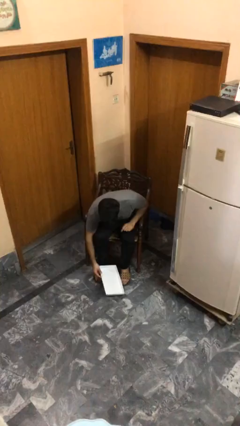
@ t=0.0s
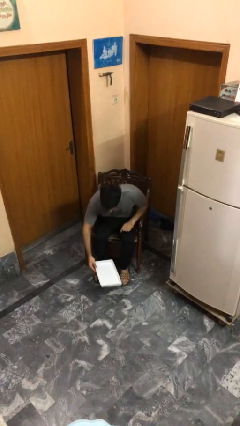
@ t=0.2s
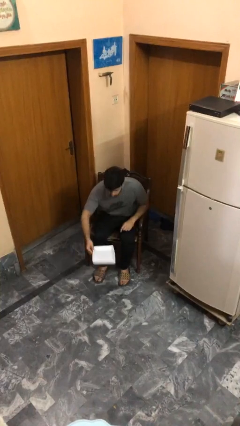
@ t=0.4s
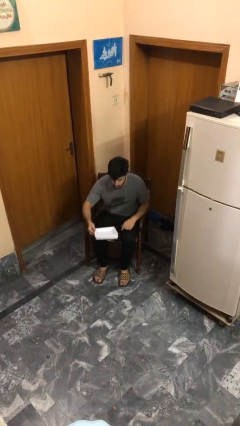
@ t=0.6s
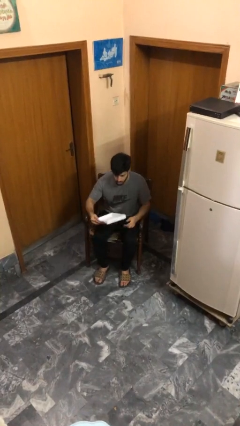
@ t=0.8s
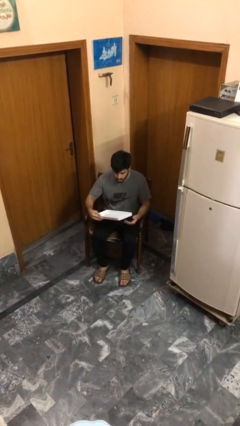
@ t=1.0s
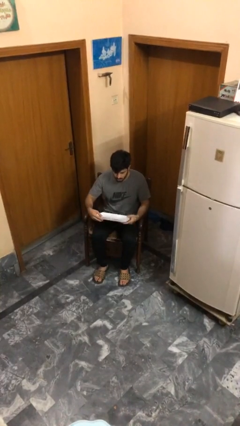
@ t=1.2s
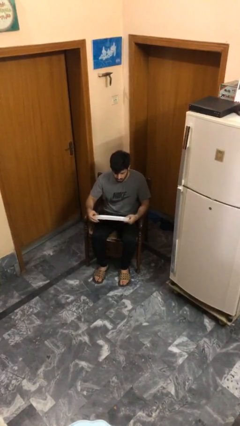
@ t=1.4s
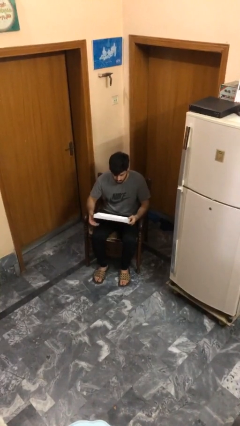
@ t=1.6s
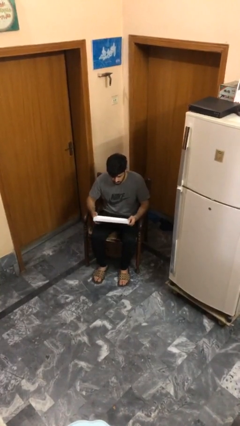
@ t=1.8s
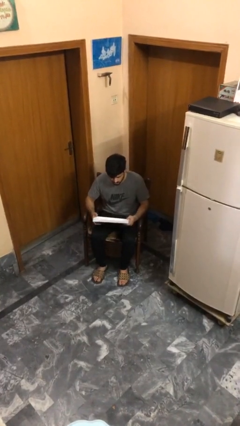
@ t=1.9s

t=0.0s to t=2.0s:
person picks up object from floor

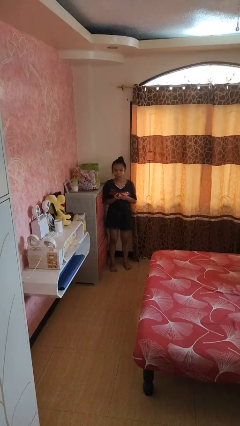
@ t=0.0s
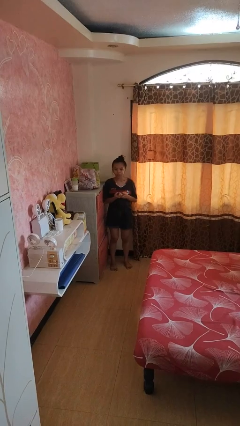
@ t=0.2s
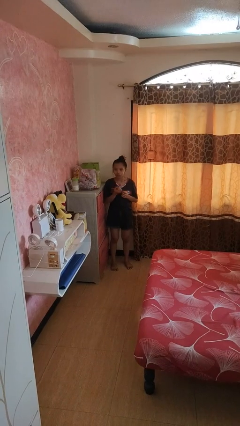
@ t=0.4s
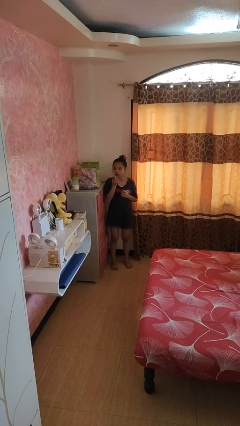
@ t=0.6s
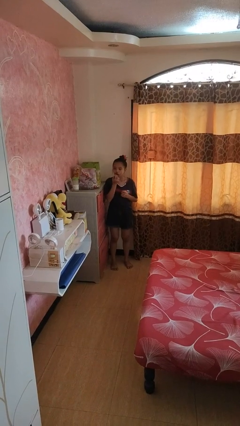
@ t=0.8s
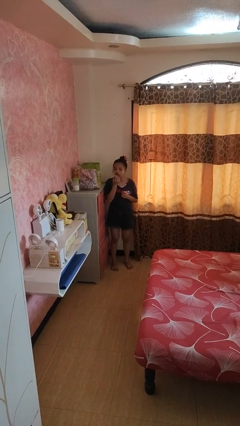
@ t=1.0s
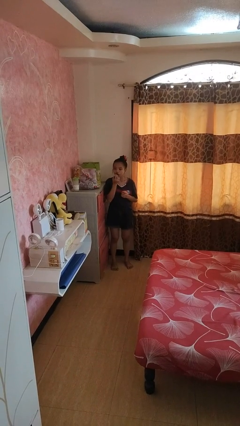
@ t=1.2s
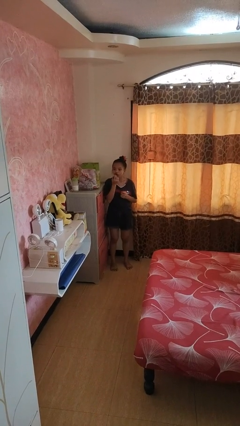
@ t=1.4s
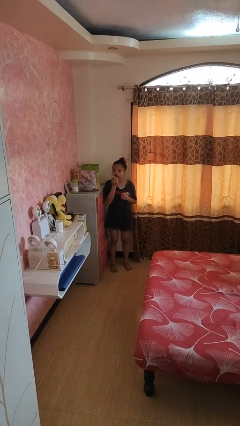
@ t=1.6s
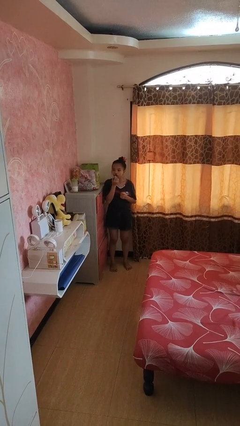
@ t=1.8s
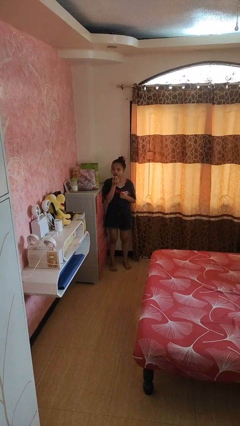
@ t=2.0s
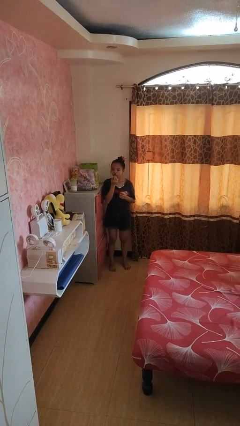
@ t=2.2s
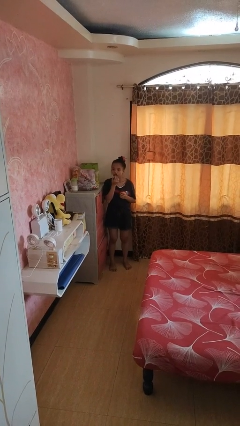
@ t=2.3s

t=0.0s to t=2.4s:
person applies lip makeup

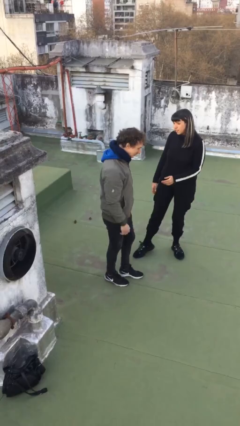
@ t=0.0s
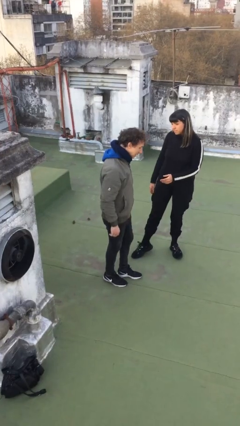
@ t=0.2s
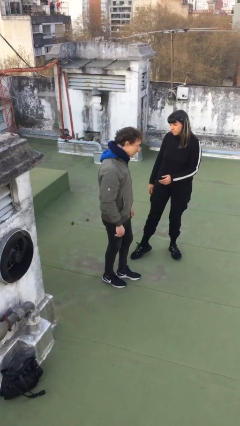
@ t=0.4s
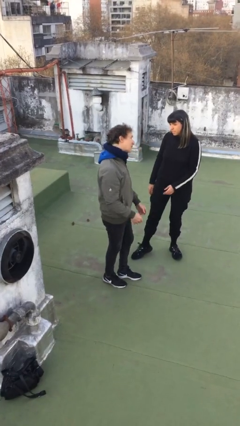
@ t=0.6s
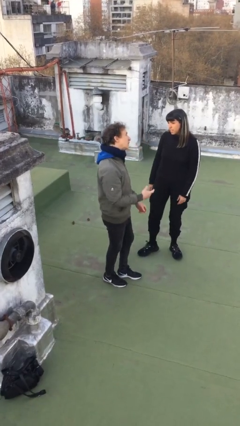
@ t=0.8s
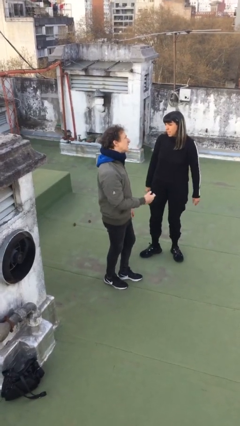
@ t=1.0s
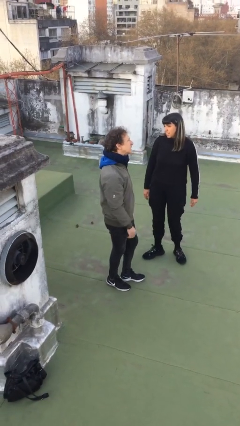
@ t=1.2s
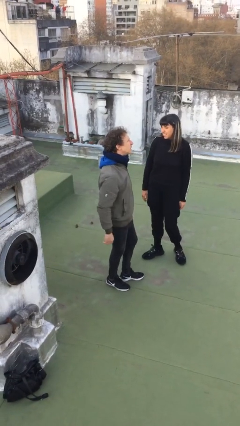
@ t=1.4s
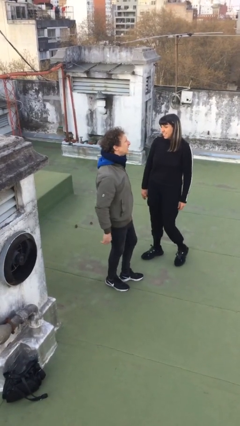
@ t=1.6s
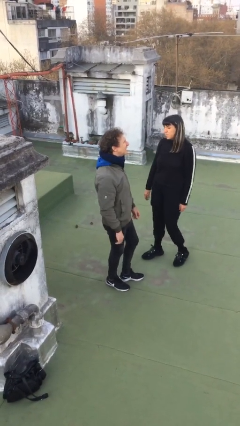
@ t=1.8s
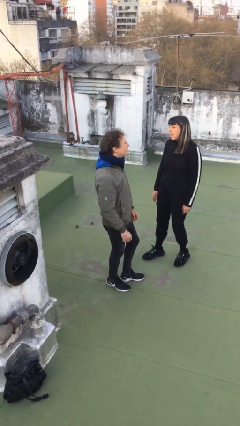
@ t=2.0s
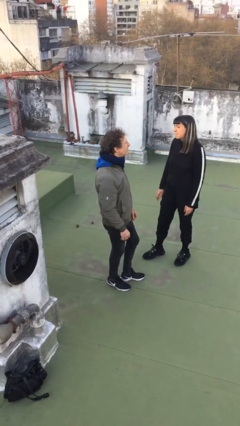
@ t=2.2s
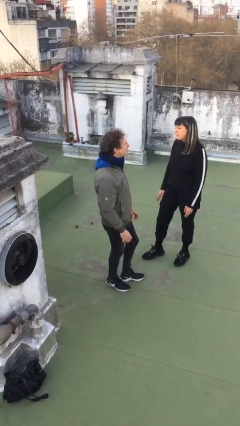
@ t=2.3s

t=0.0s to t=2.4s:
person talks to person

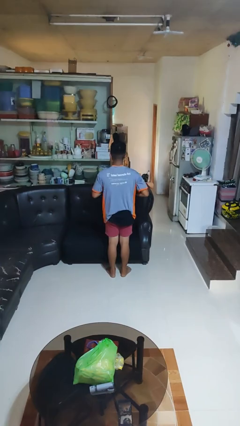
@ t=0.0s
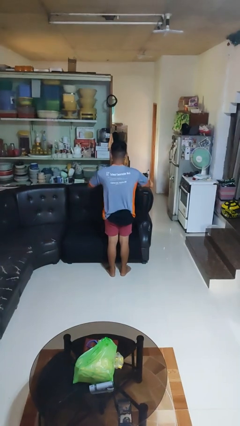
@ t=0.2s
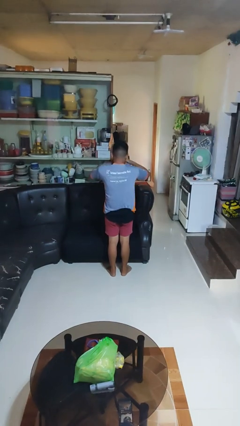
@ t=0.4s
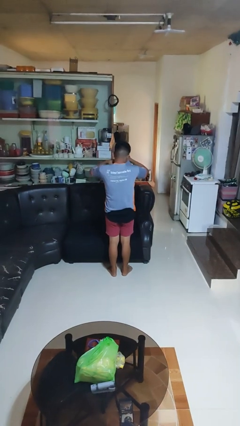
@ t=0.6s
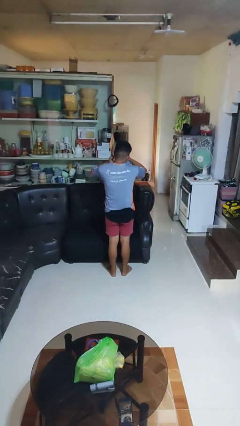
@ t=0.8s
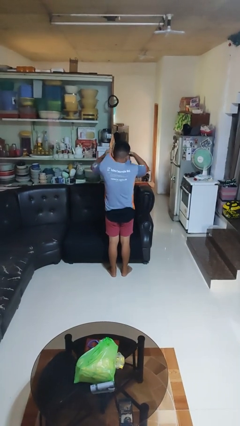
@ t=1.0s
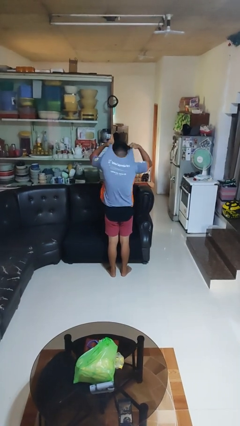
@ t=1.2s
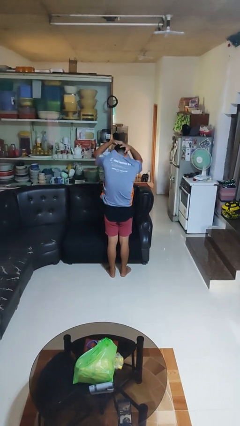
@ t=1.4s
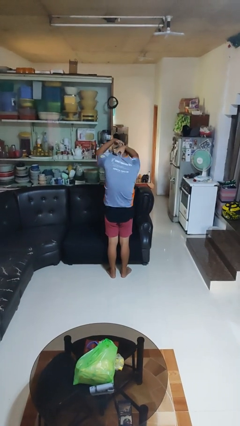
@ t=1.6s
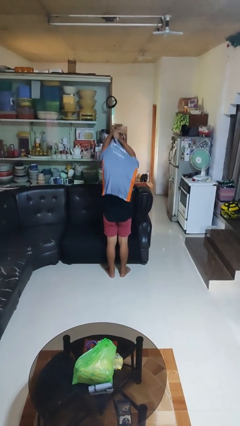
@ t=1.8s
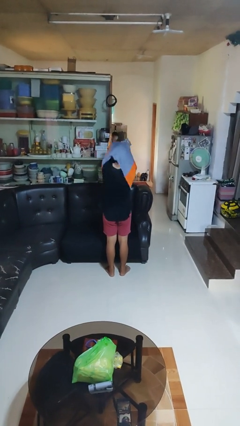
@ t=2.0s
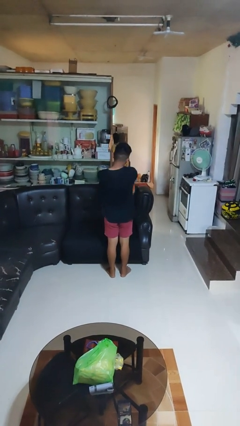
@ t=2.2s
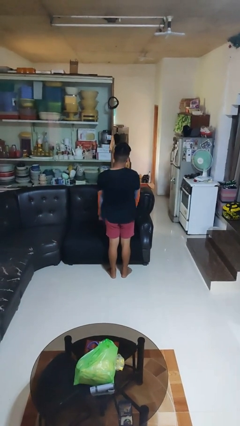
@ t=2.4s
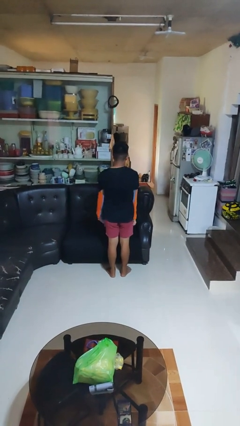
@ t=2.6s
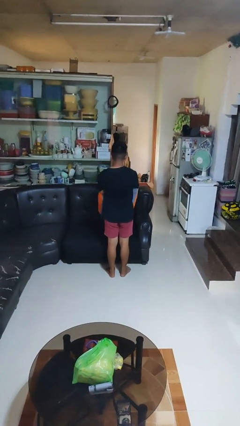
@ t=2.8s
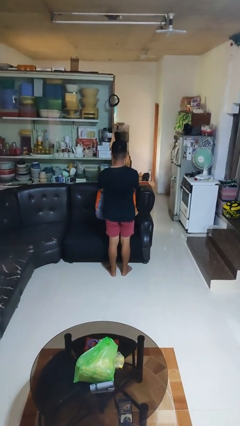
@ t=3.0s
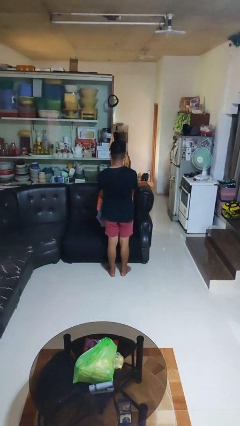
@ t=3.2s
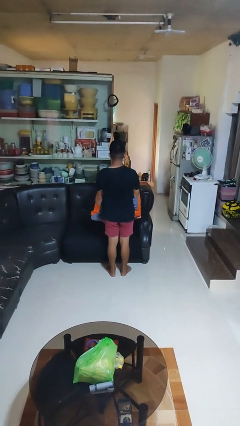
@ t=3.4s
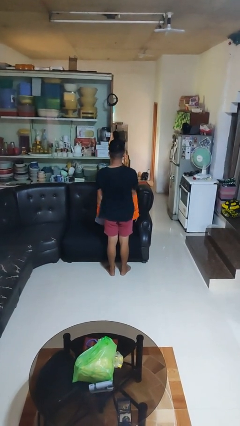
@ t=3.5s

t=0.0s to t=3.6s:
person takes off shirt

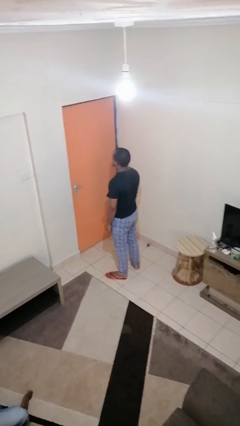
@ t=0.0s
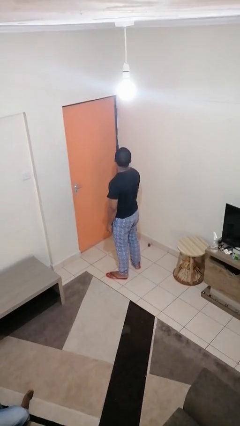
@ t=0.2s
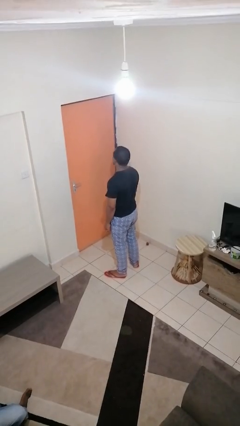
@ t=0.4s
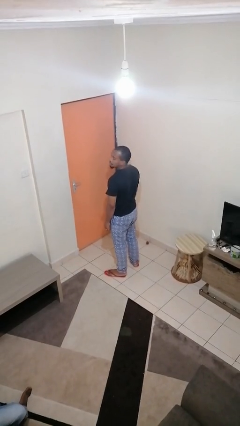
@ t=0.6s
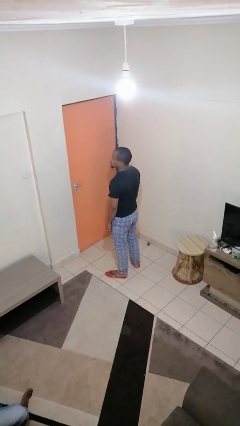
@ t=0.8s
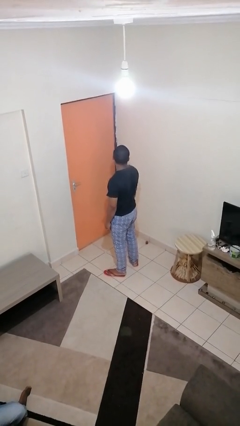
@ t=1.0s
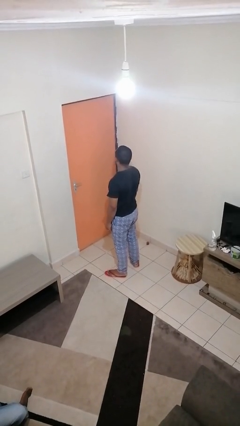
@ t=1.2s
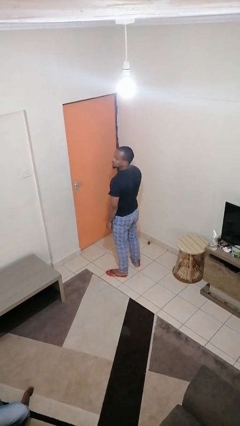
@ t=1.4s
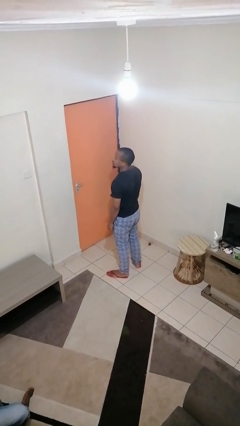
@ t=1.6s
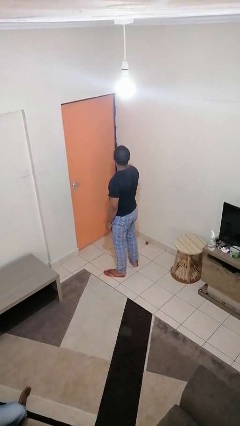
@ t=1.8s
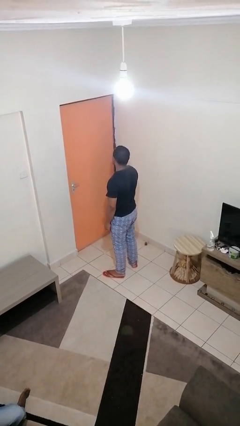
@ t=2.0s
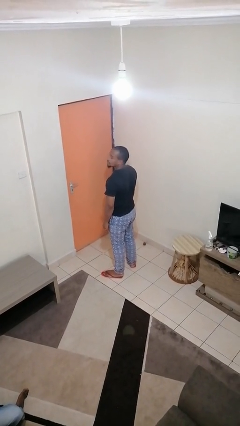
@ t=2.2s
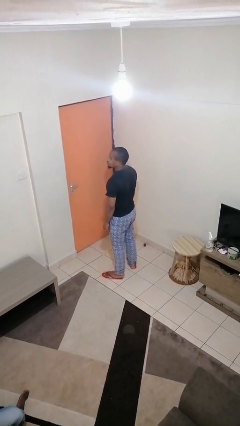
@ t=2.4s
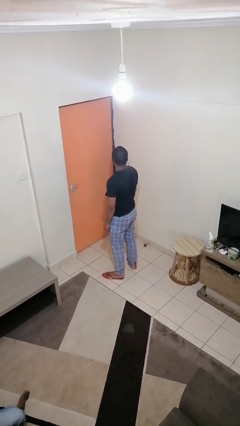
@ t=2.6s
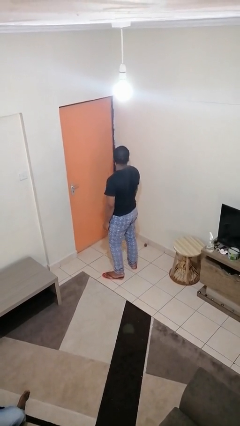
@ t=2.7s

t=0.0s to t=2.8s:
person shakes head

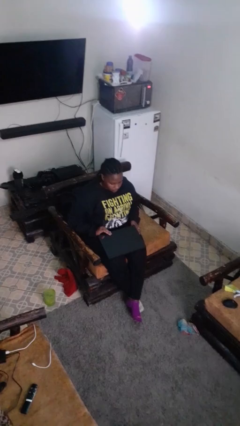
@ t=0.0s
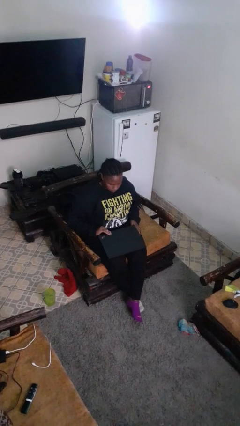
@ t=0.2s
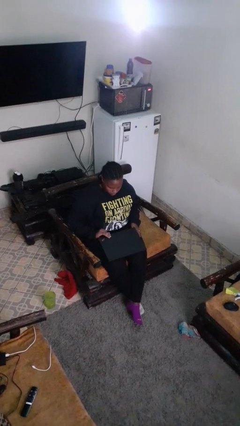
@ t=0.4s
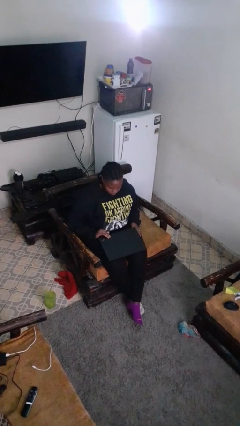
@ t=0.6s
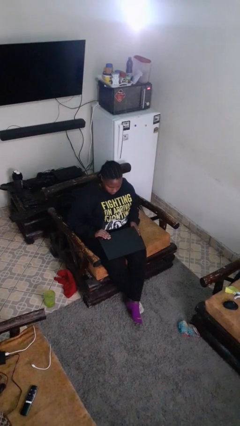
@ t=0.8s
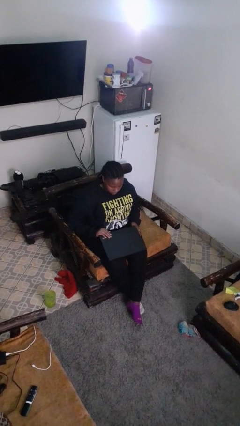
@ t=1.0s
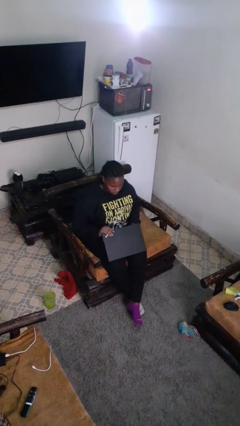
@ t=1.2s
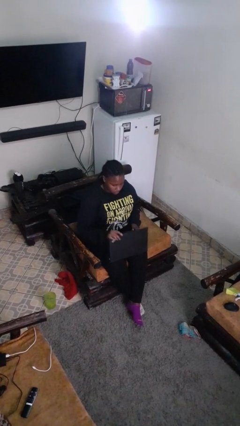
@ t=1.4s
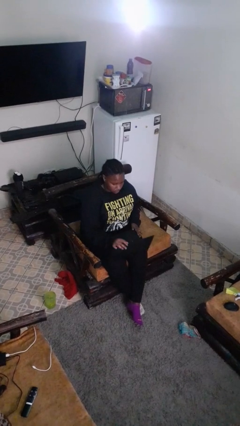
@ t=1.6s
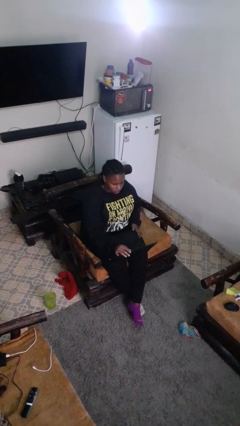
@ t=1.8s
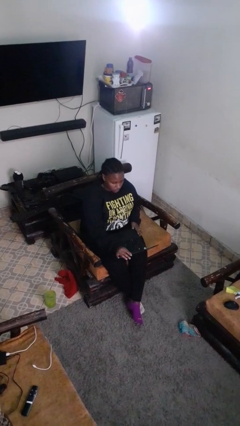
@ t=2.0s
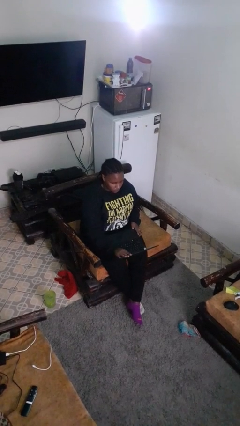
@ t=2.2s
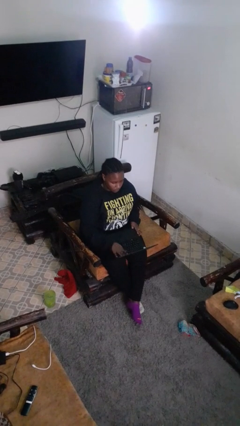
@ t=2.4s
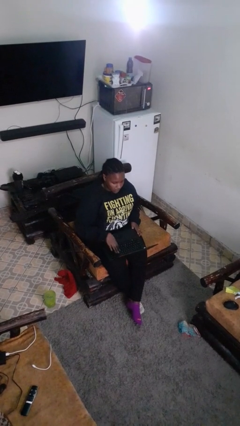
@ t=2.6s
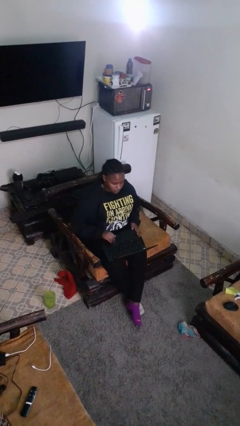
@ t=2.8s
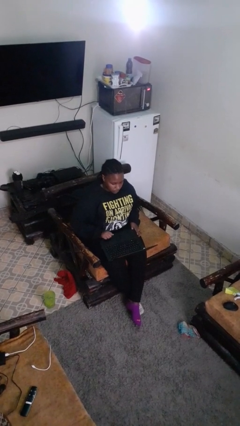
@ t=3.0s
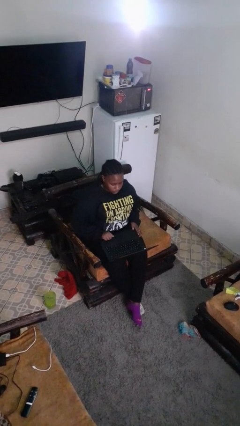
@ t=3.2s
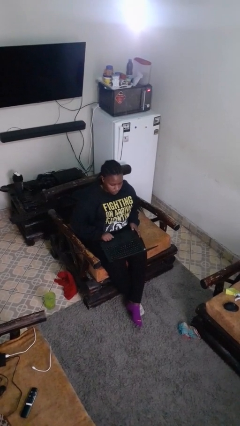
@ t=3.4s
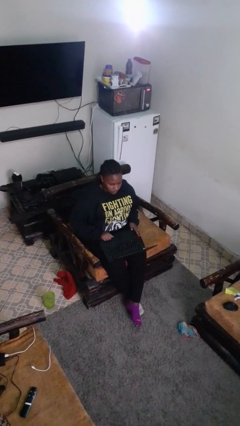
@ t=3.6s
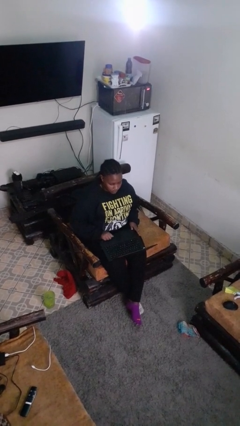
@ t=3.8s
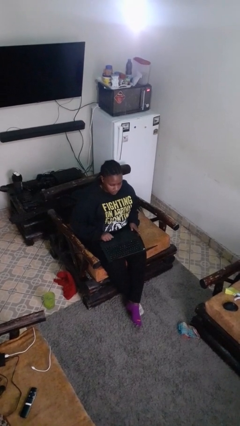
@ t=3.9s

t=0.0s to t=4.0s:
person opens laptop

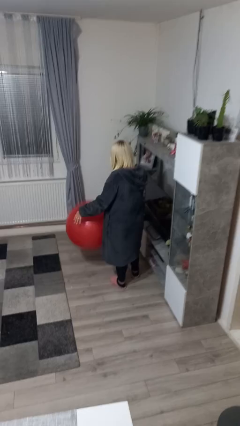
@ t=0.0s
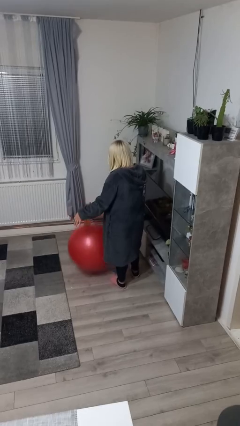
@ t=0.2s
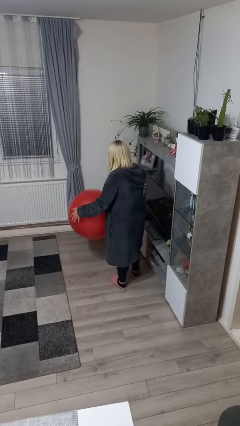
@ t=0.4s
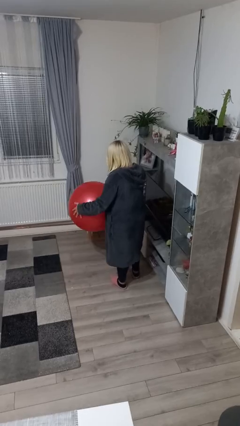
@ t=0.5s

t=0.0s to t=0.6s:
person bounces ball on floor
